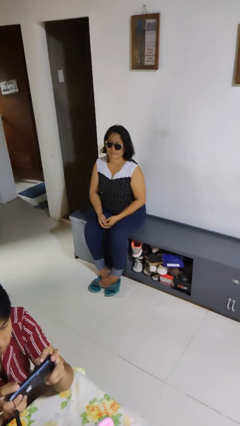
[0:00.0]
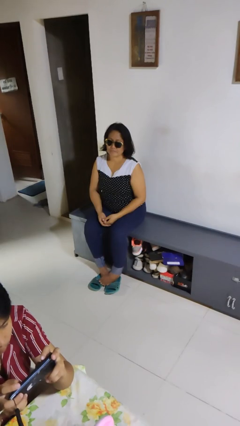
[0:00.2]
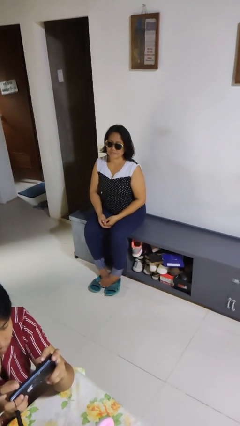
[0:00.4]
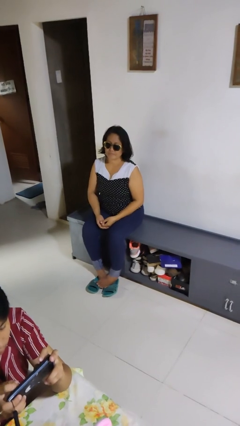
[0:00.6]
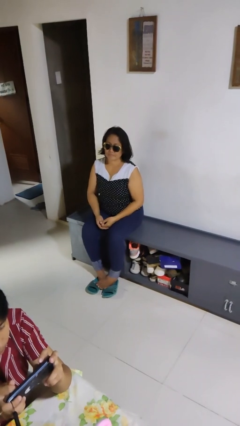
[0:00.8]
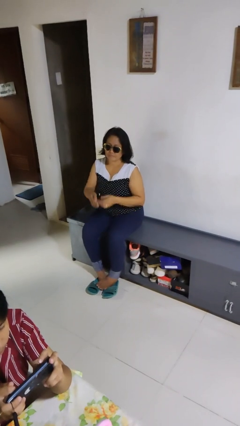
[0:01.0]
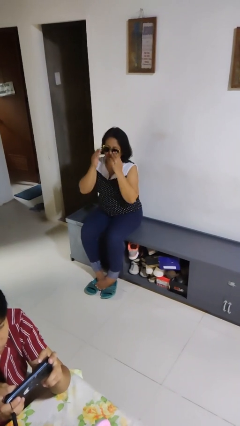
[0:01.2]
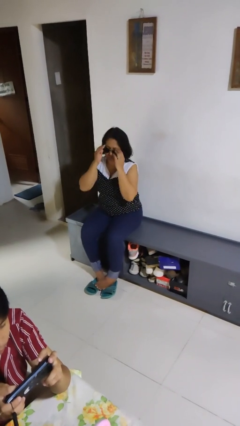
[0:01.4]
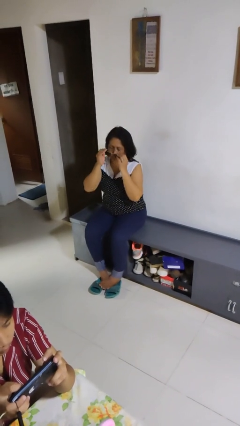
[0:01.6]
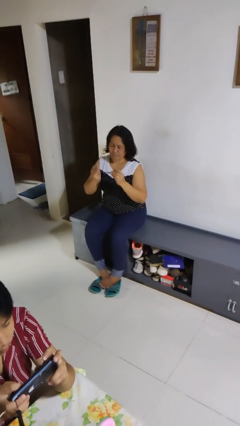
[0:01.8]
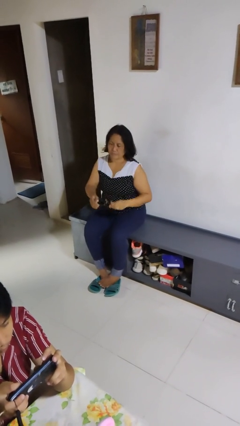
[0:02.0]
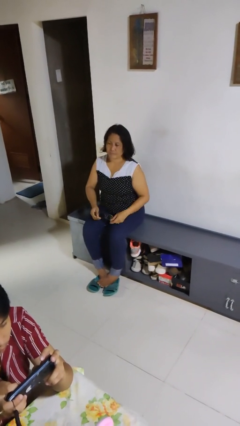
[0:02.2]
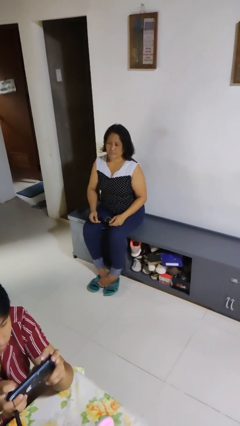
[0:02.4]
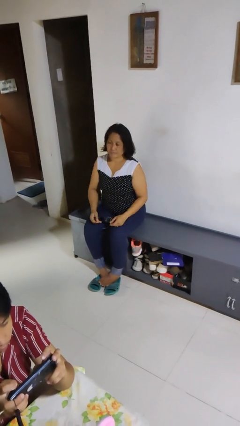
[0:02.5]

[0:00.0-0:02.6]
person takes off sunglasses

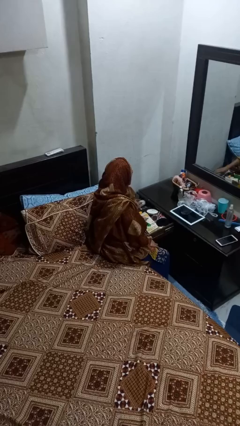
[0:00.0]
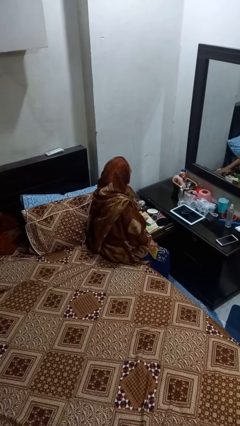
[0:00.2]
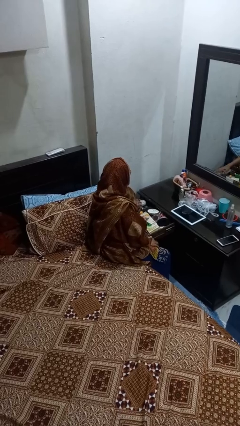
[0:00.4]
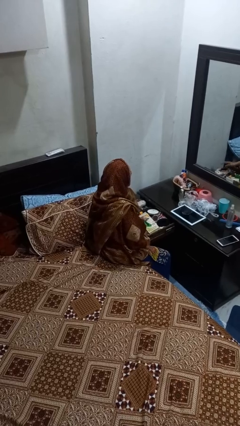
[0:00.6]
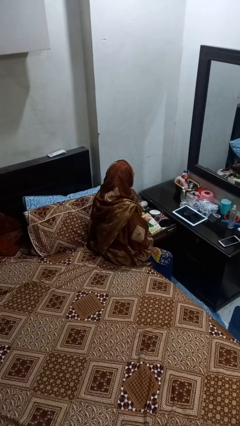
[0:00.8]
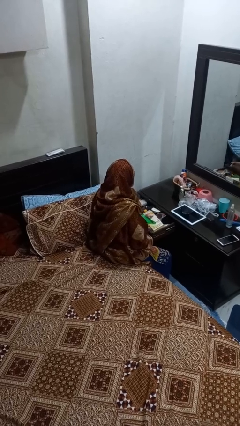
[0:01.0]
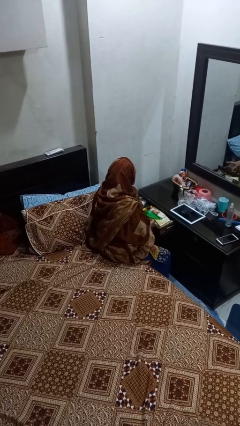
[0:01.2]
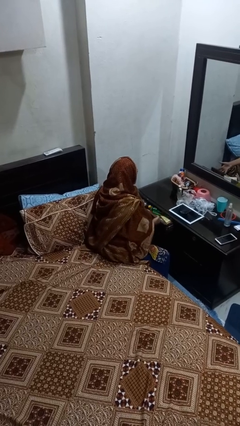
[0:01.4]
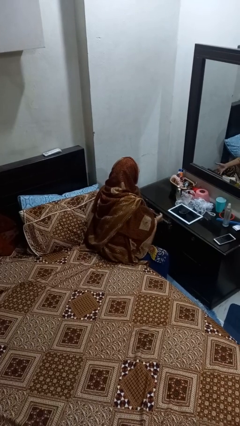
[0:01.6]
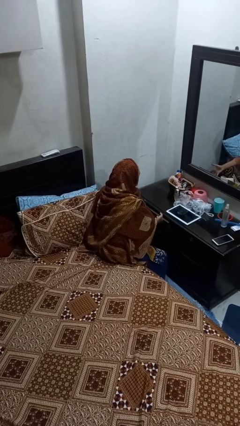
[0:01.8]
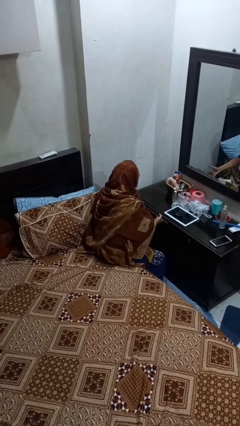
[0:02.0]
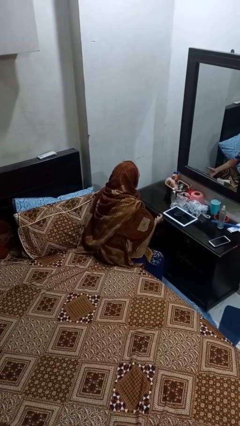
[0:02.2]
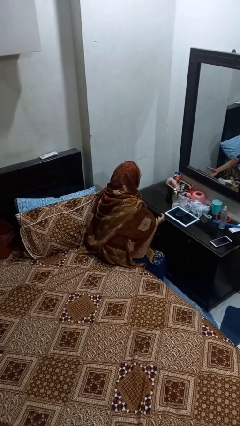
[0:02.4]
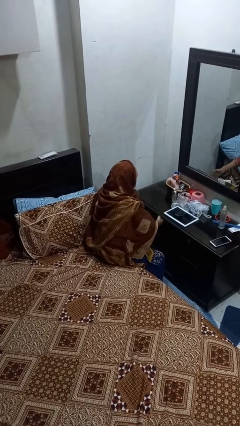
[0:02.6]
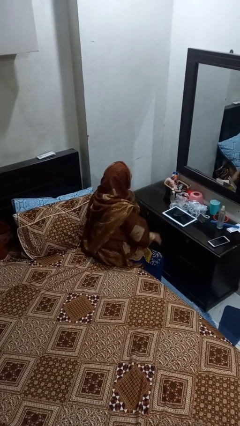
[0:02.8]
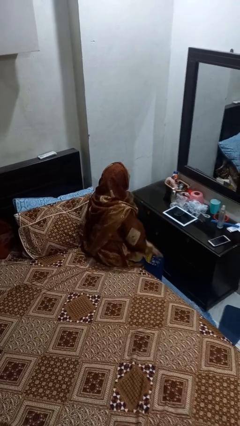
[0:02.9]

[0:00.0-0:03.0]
person closes dresser drawer

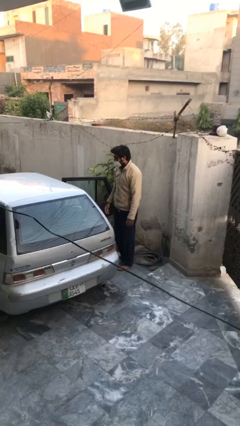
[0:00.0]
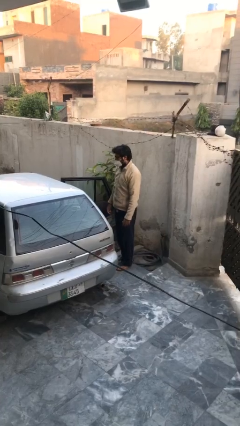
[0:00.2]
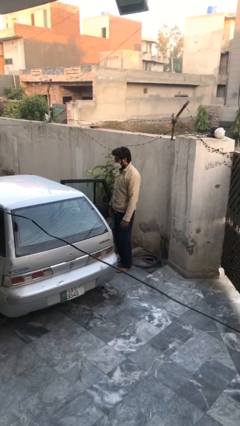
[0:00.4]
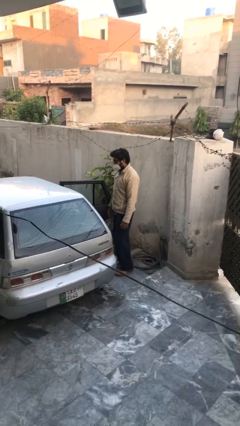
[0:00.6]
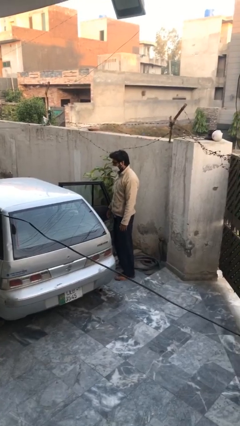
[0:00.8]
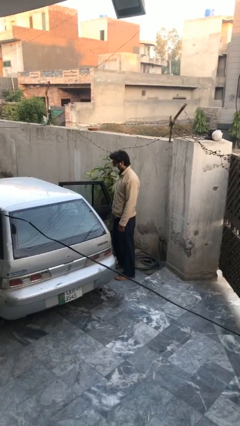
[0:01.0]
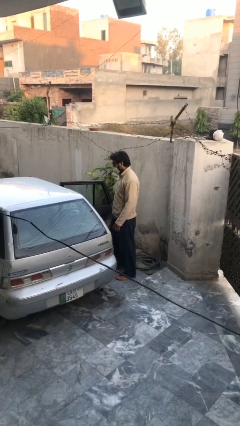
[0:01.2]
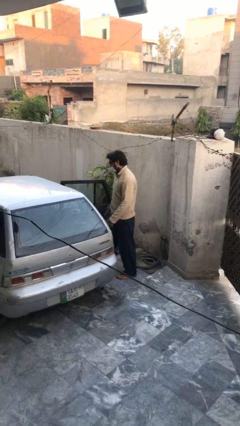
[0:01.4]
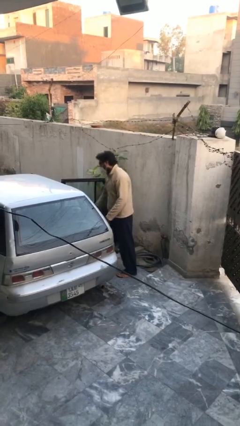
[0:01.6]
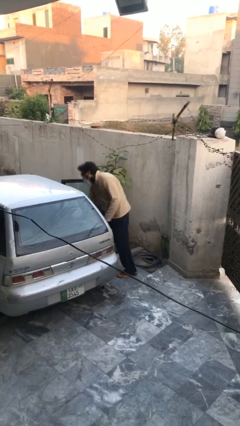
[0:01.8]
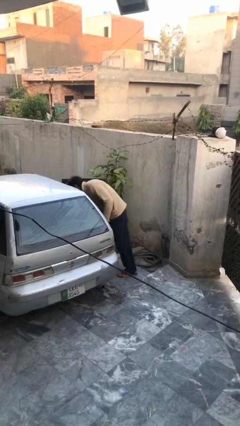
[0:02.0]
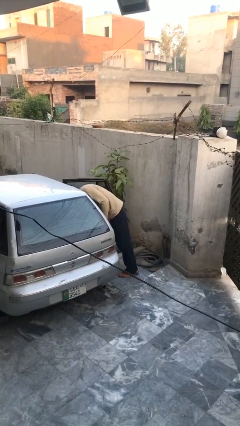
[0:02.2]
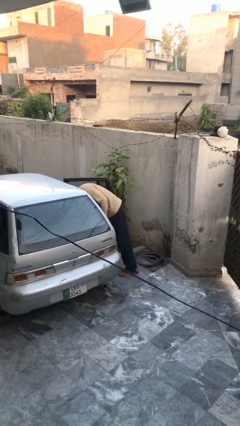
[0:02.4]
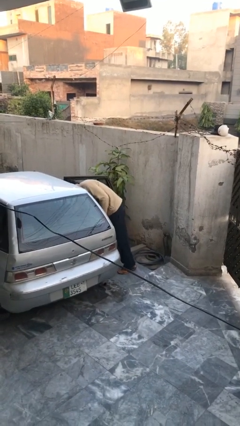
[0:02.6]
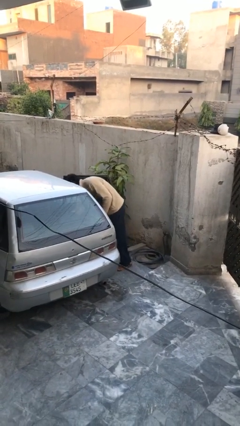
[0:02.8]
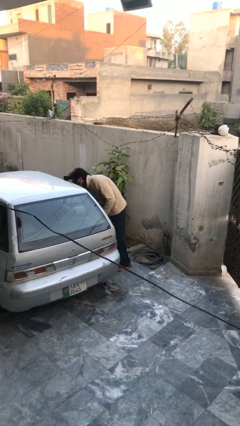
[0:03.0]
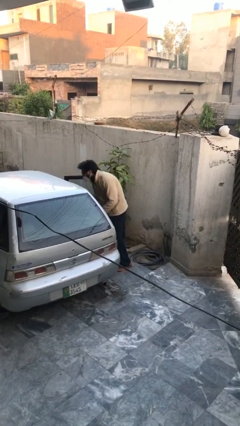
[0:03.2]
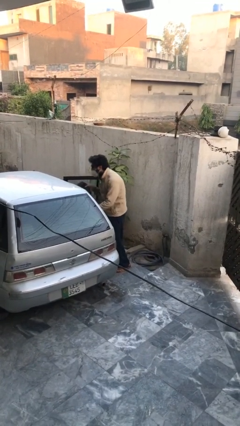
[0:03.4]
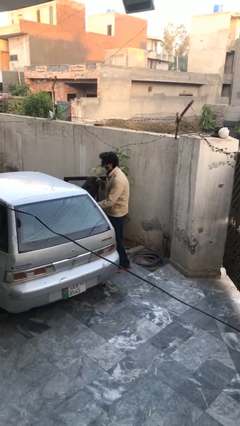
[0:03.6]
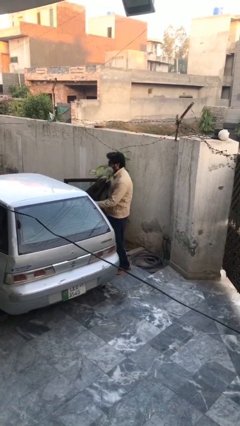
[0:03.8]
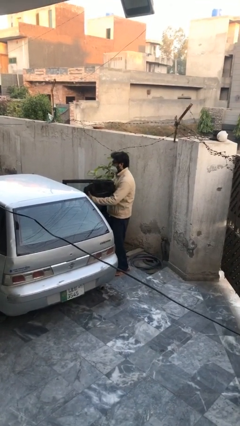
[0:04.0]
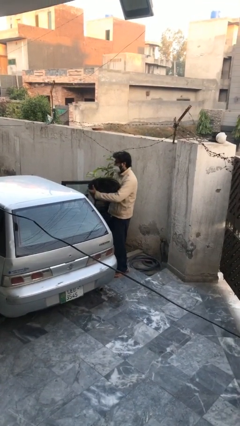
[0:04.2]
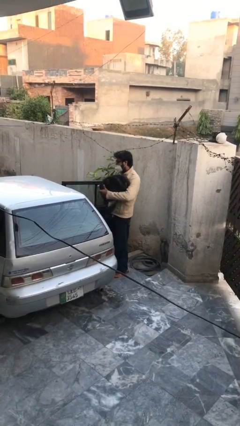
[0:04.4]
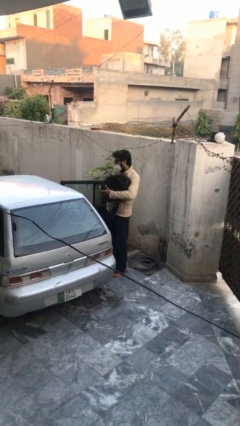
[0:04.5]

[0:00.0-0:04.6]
person unloads car

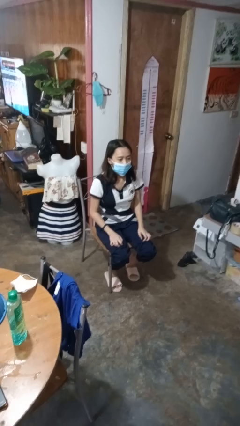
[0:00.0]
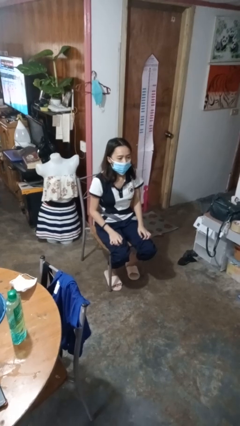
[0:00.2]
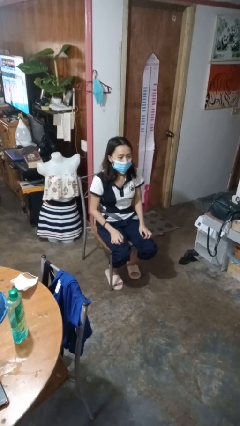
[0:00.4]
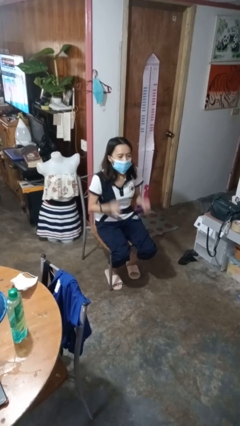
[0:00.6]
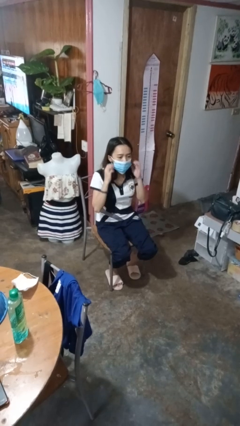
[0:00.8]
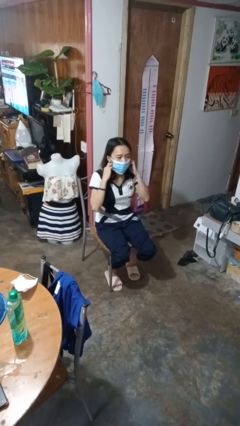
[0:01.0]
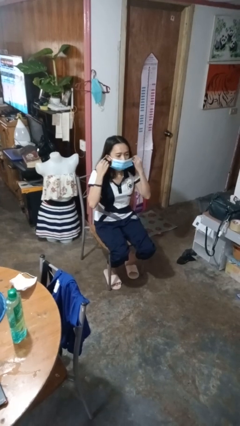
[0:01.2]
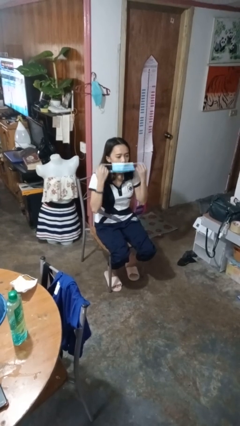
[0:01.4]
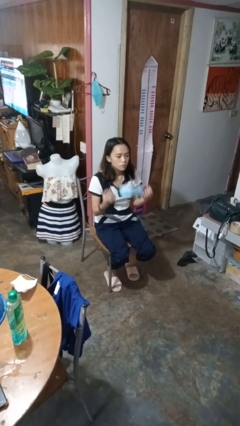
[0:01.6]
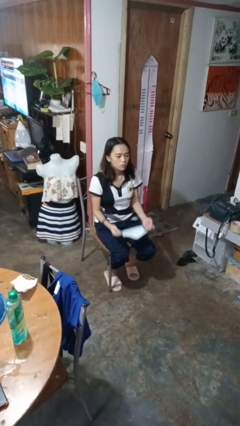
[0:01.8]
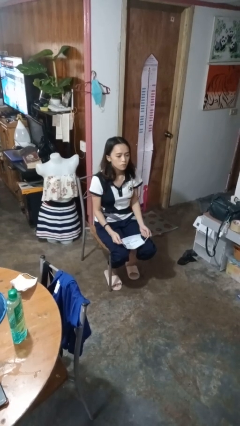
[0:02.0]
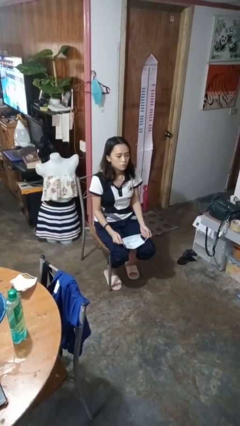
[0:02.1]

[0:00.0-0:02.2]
person takes off facemask

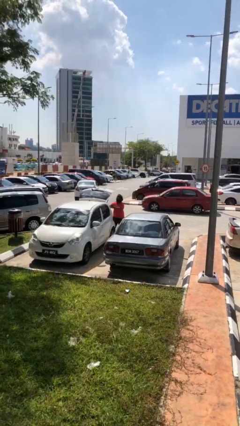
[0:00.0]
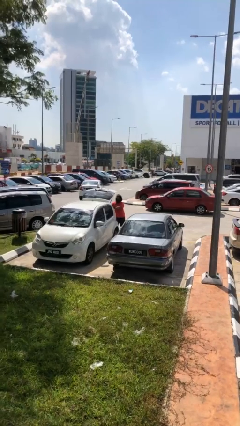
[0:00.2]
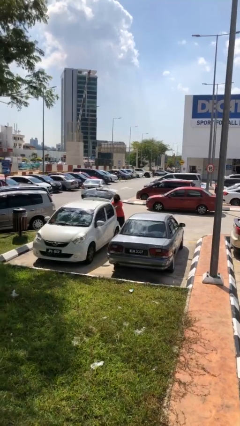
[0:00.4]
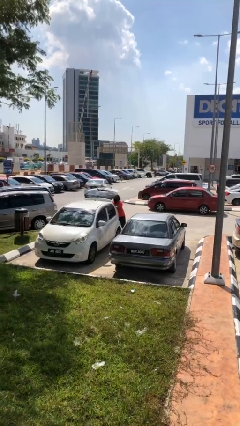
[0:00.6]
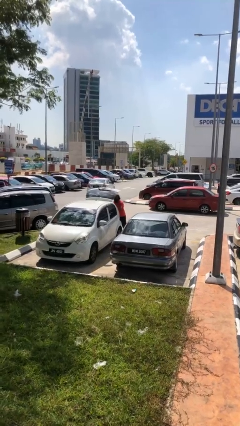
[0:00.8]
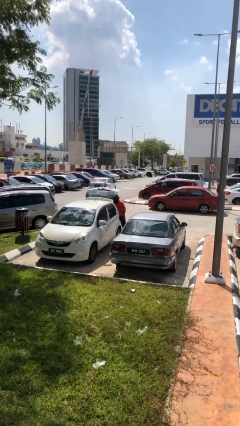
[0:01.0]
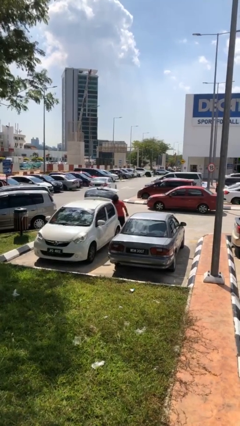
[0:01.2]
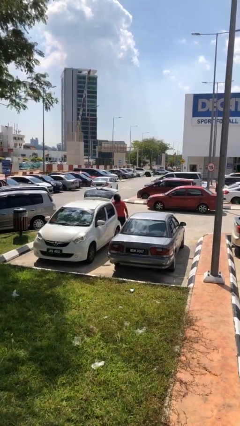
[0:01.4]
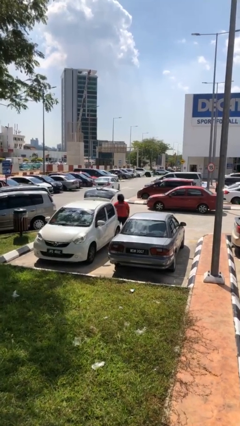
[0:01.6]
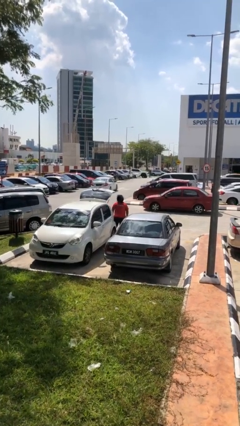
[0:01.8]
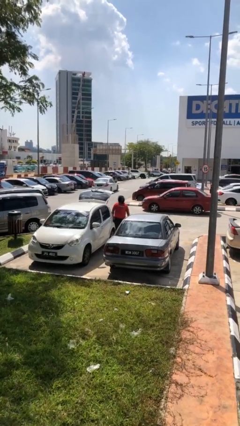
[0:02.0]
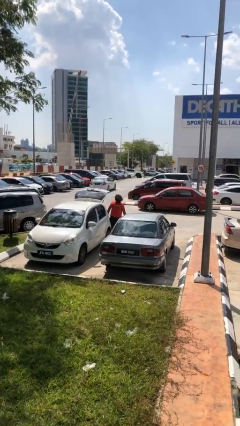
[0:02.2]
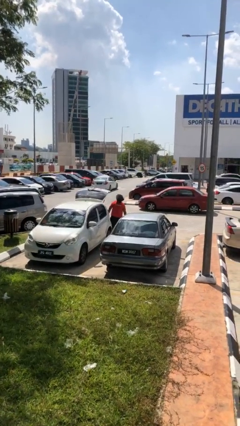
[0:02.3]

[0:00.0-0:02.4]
person loads car

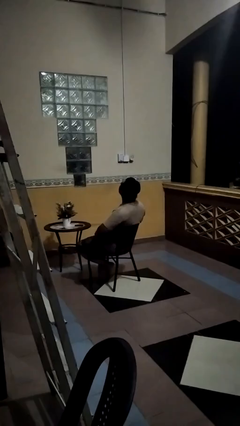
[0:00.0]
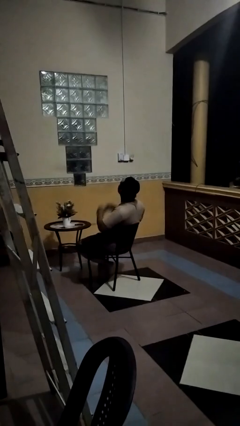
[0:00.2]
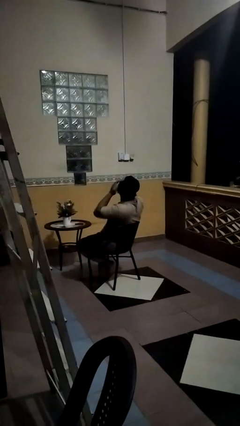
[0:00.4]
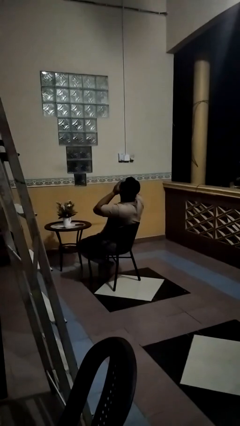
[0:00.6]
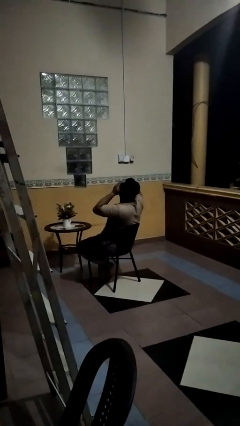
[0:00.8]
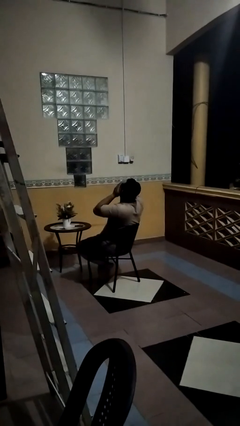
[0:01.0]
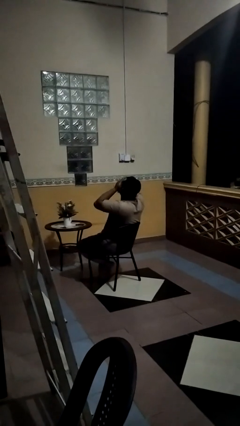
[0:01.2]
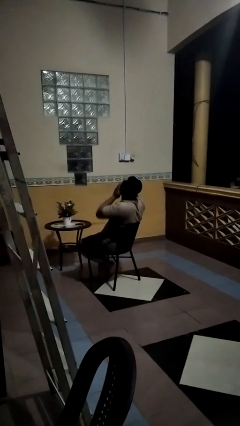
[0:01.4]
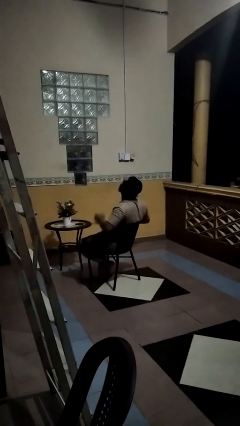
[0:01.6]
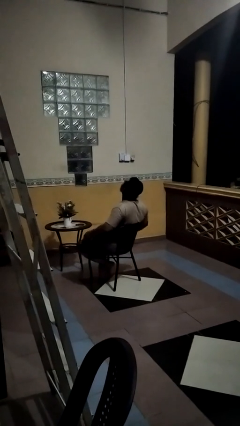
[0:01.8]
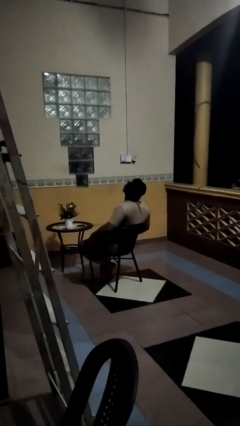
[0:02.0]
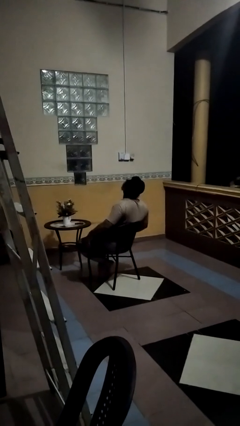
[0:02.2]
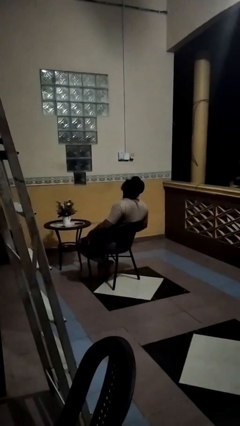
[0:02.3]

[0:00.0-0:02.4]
person covers face with hands

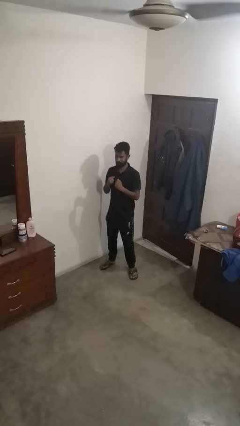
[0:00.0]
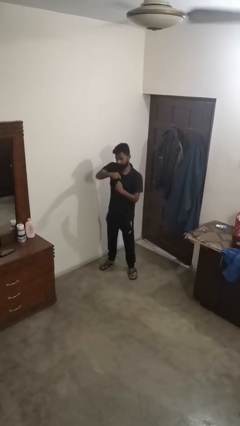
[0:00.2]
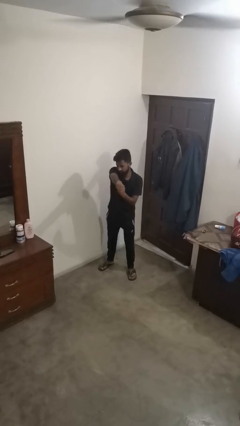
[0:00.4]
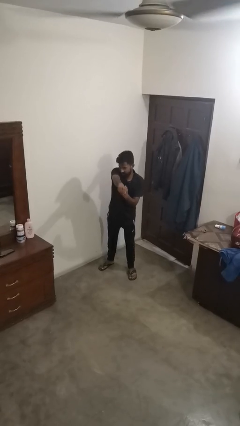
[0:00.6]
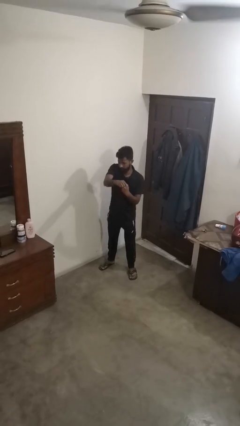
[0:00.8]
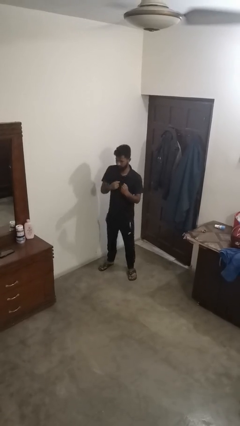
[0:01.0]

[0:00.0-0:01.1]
person punches
